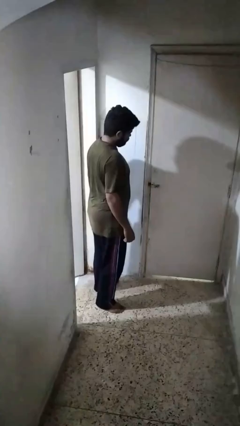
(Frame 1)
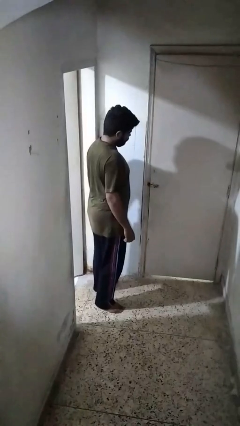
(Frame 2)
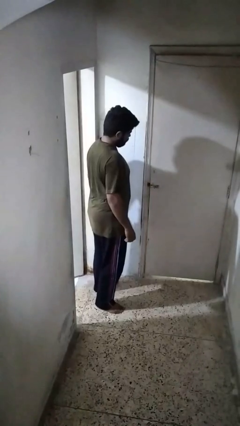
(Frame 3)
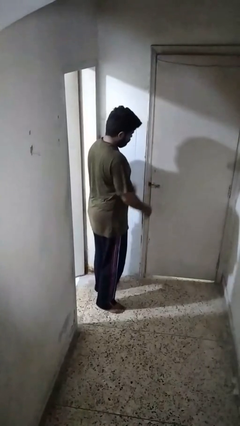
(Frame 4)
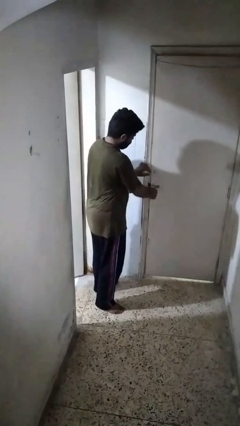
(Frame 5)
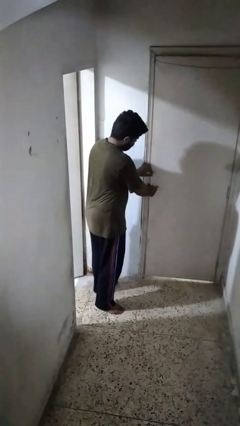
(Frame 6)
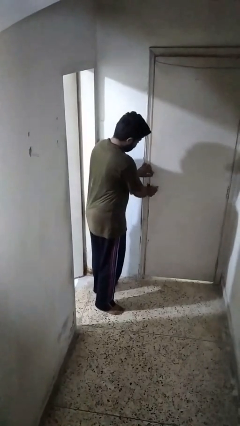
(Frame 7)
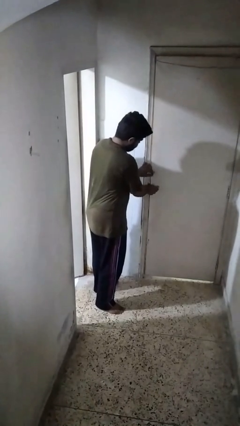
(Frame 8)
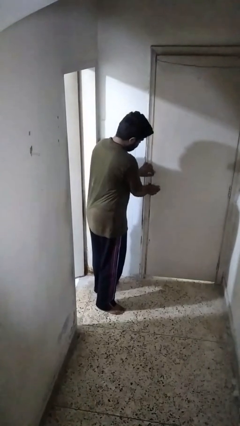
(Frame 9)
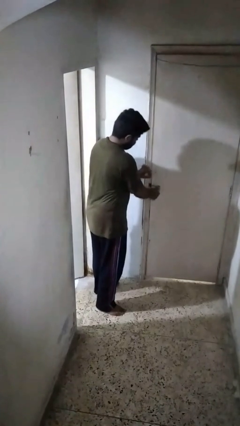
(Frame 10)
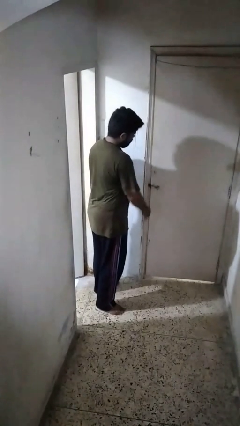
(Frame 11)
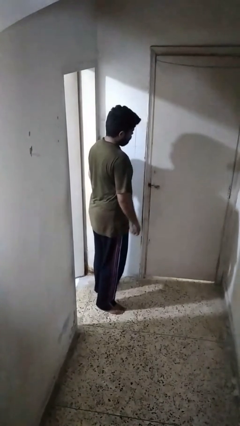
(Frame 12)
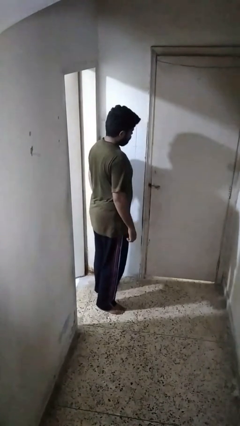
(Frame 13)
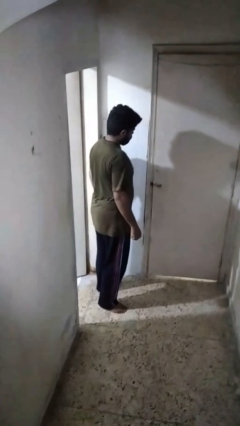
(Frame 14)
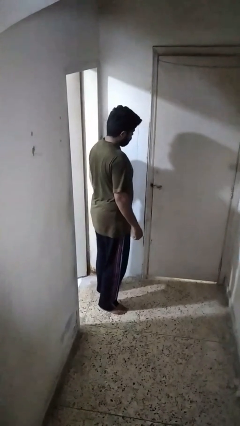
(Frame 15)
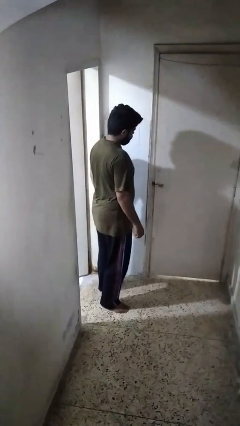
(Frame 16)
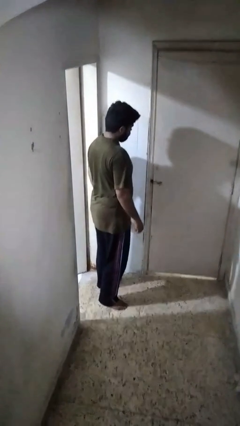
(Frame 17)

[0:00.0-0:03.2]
person unlocks door with keys

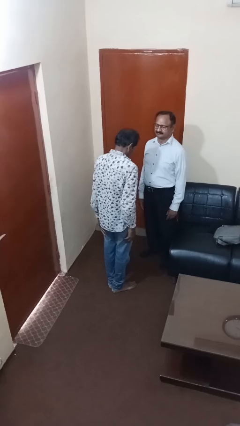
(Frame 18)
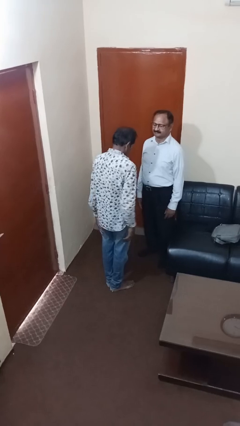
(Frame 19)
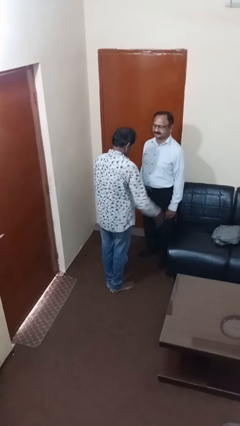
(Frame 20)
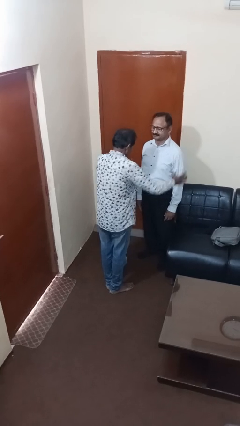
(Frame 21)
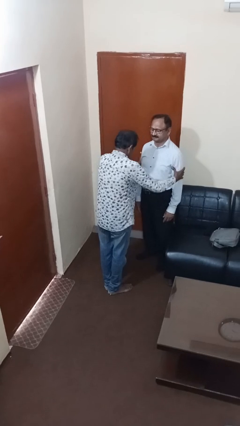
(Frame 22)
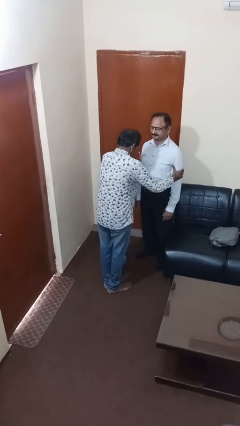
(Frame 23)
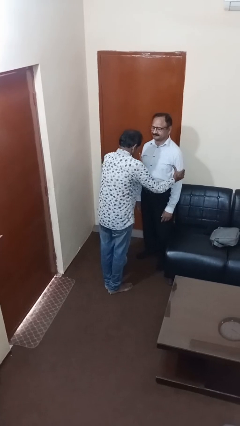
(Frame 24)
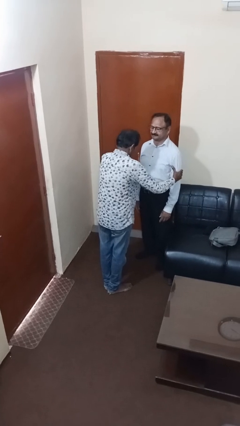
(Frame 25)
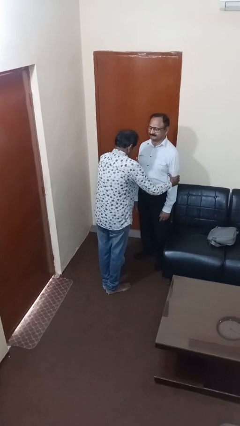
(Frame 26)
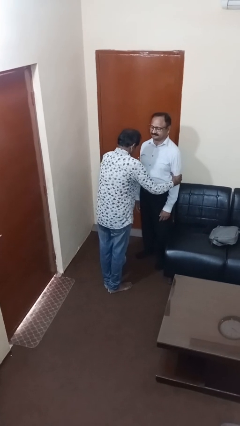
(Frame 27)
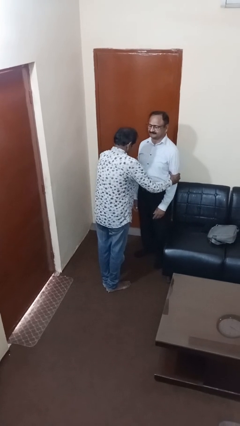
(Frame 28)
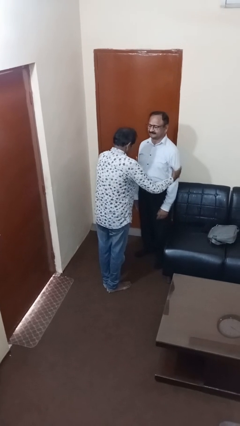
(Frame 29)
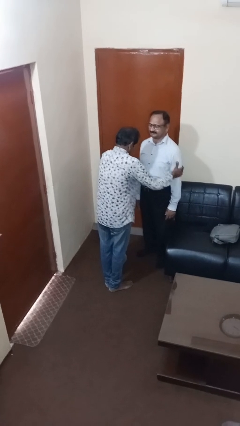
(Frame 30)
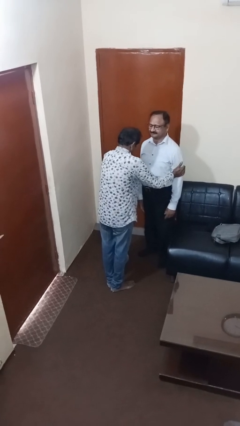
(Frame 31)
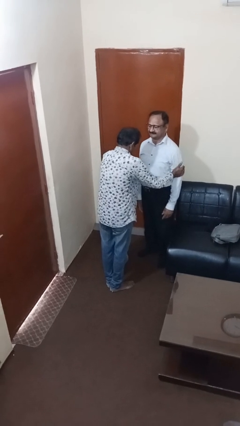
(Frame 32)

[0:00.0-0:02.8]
person grabs person by bicep

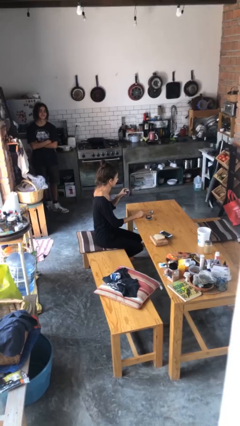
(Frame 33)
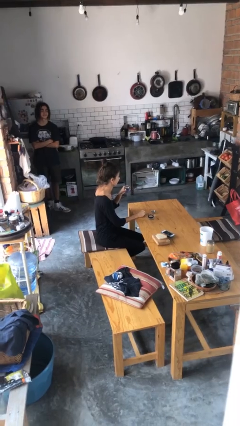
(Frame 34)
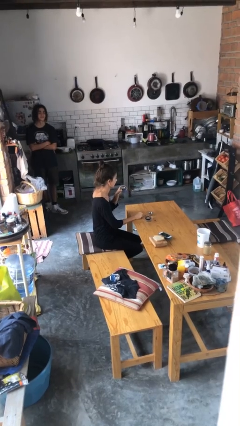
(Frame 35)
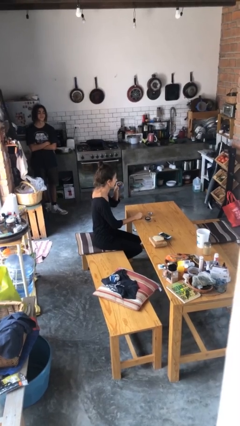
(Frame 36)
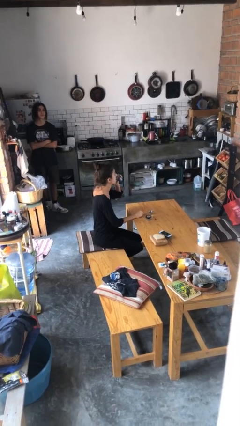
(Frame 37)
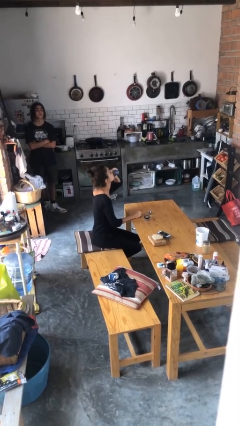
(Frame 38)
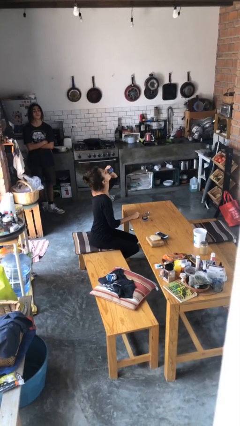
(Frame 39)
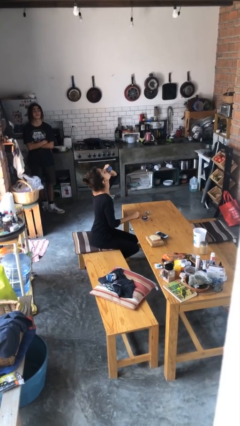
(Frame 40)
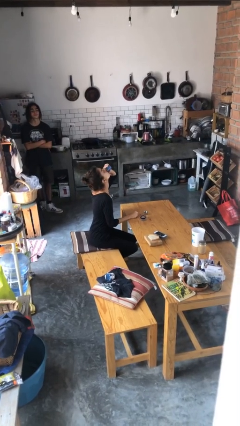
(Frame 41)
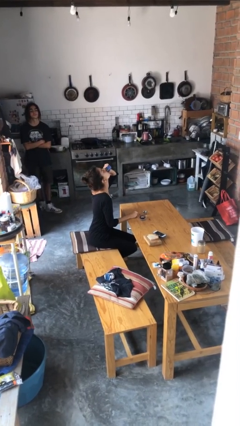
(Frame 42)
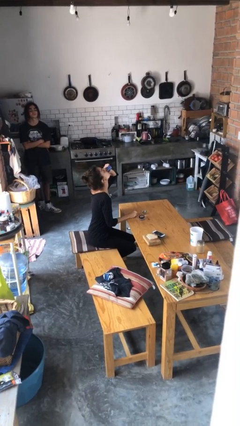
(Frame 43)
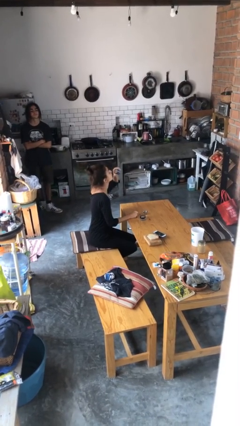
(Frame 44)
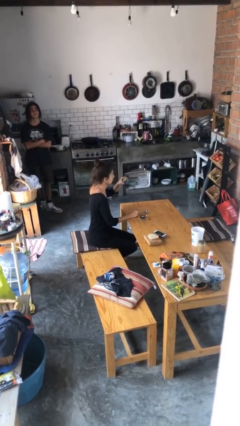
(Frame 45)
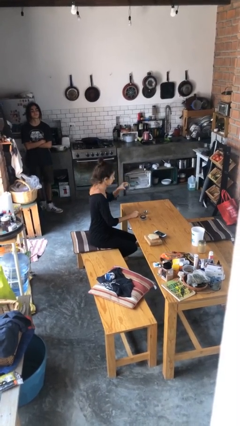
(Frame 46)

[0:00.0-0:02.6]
person drinks from shotglass

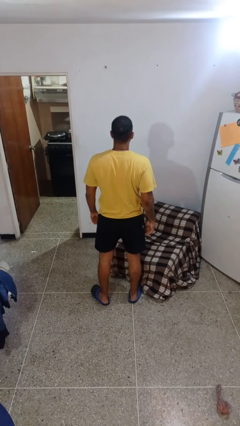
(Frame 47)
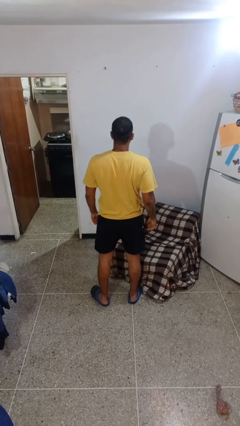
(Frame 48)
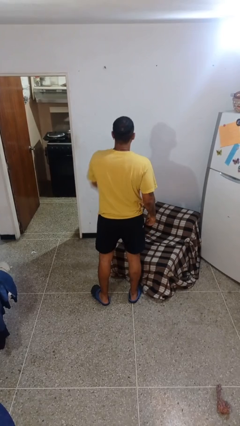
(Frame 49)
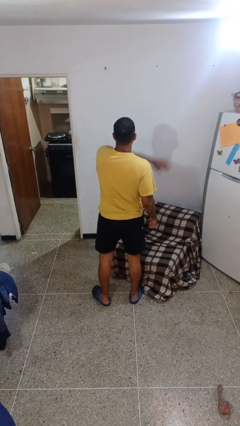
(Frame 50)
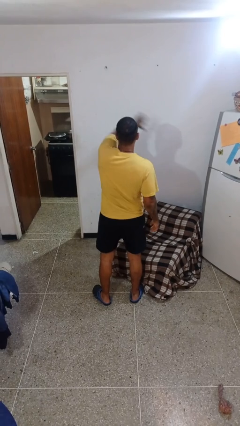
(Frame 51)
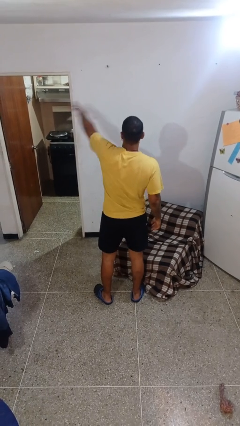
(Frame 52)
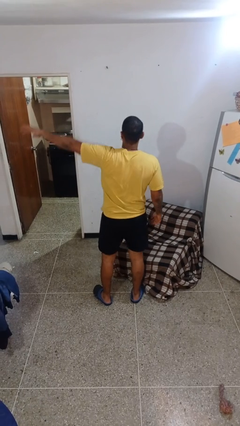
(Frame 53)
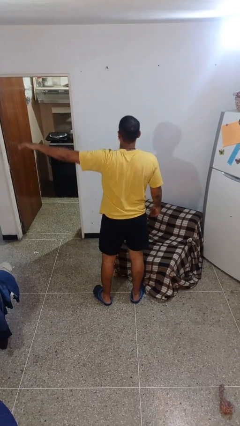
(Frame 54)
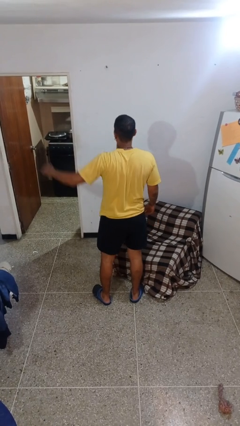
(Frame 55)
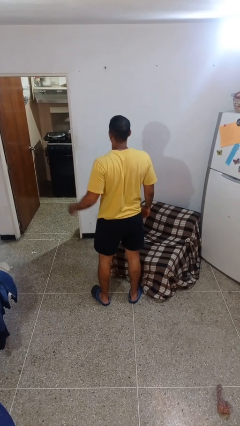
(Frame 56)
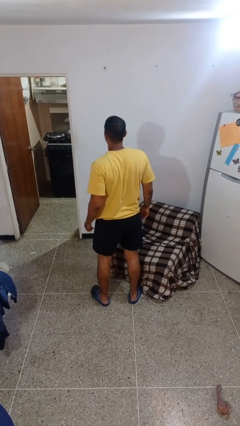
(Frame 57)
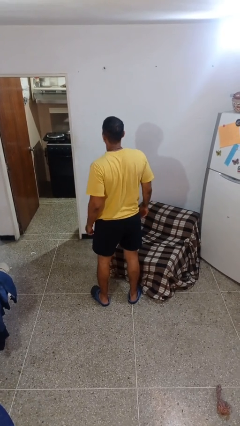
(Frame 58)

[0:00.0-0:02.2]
person gestures swipe left

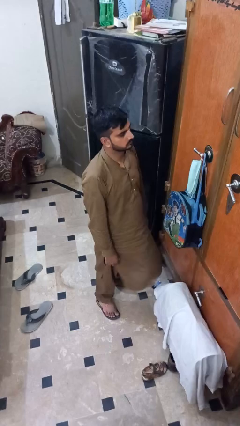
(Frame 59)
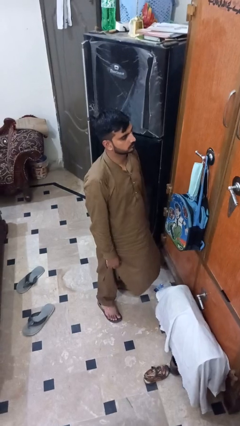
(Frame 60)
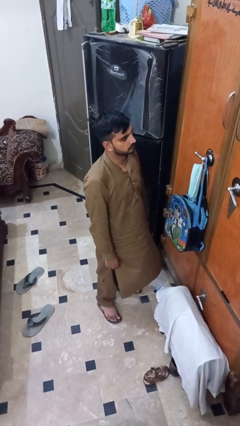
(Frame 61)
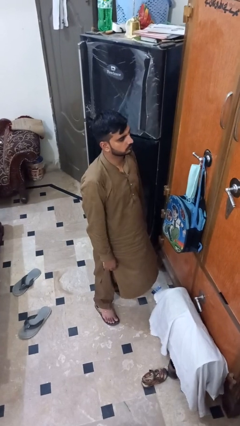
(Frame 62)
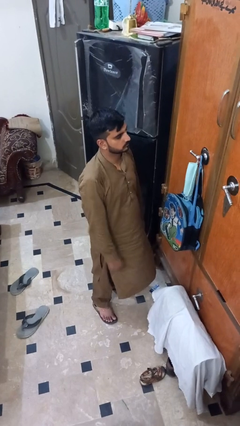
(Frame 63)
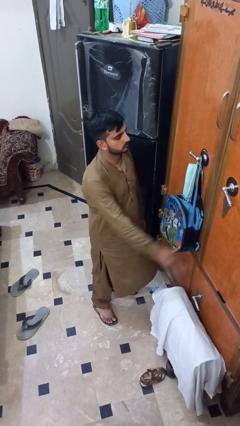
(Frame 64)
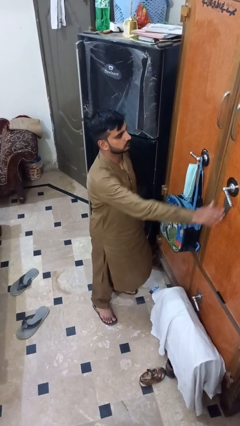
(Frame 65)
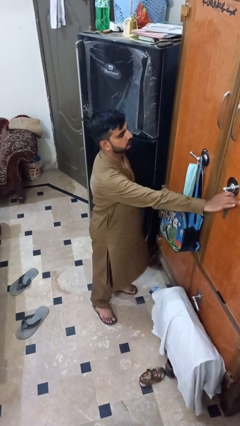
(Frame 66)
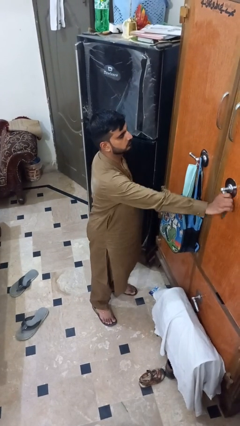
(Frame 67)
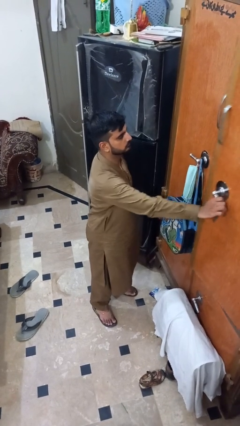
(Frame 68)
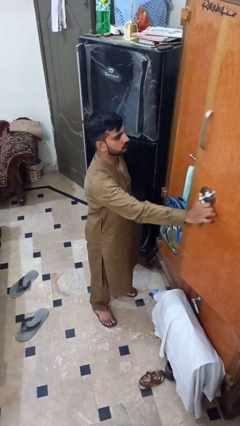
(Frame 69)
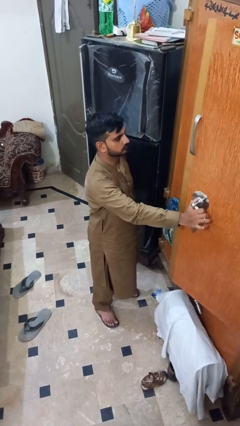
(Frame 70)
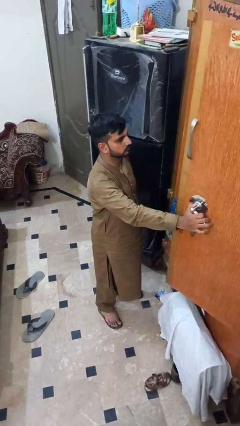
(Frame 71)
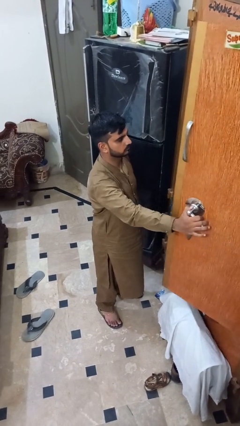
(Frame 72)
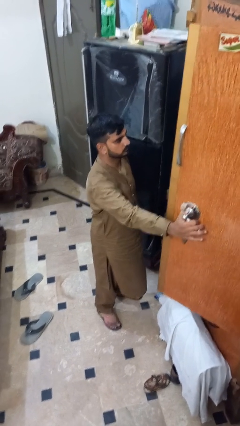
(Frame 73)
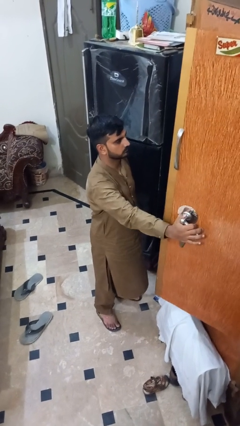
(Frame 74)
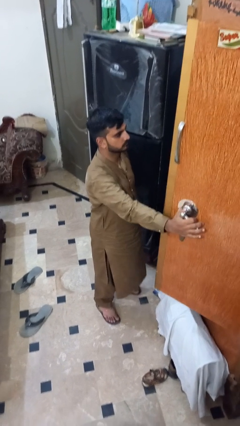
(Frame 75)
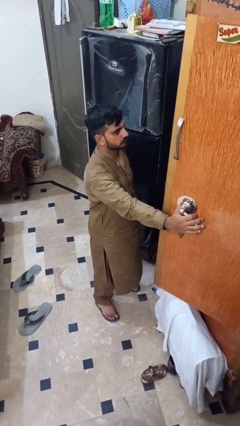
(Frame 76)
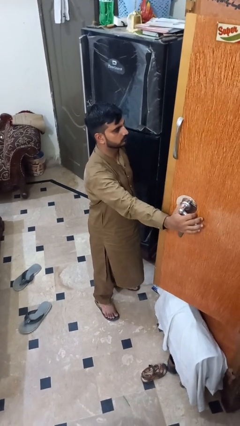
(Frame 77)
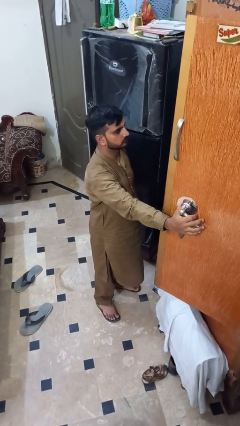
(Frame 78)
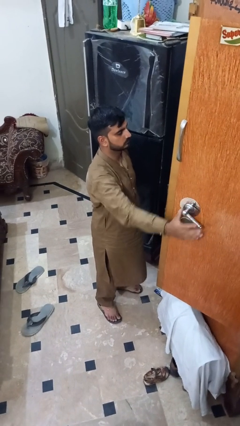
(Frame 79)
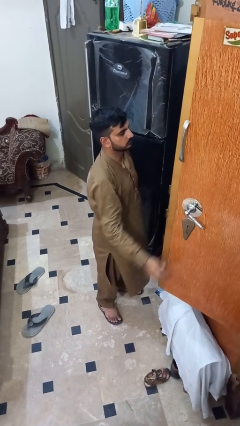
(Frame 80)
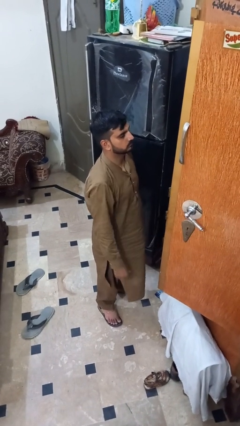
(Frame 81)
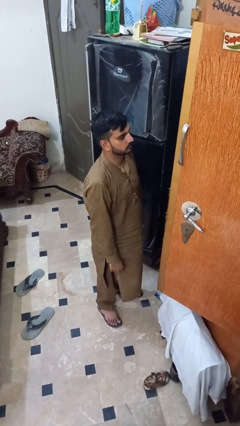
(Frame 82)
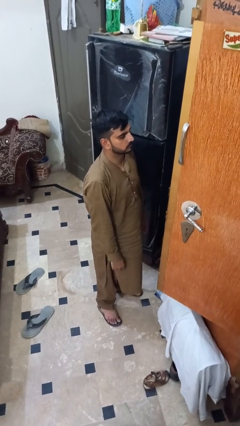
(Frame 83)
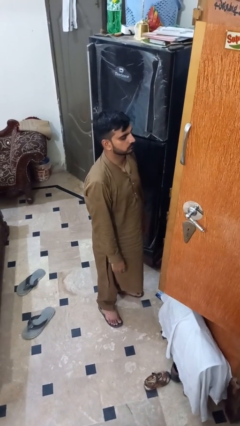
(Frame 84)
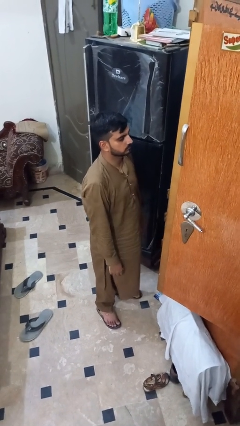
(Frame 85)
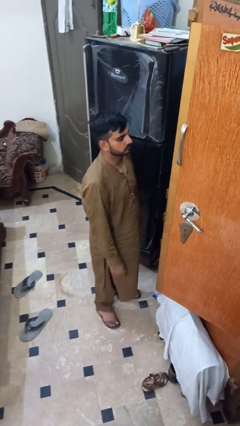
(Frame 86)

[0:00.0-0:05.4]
person opens box

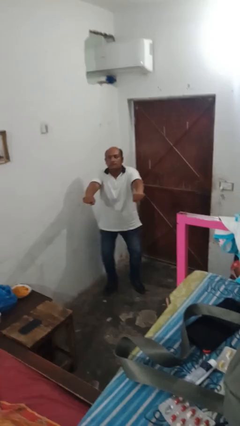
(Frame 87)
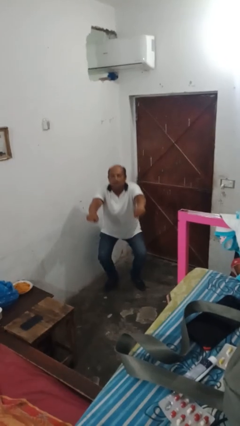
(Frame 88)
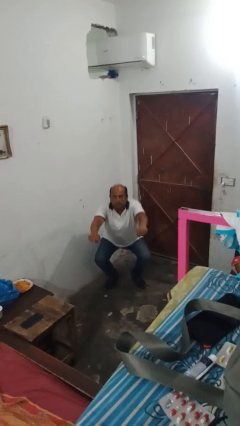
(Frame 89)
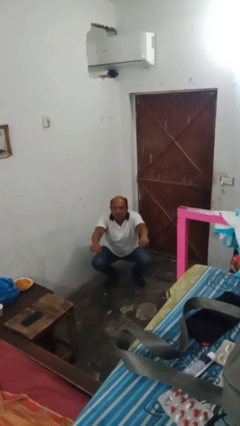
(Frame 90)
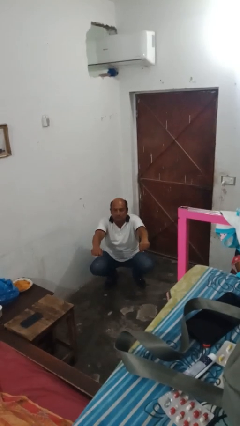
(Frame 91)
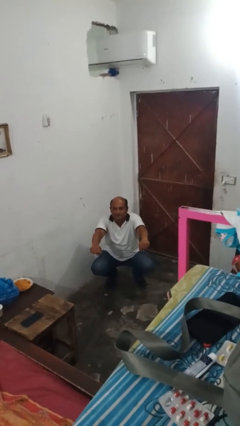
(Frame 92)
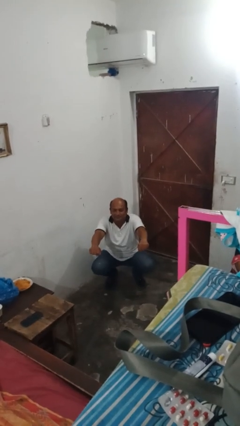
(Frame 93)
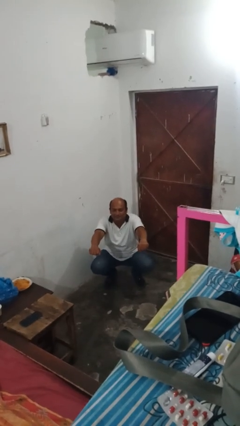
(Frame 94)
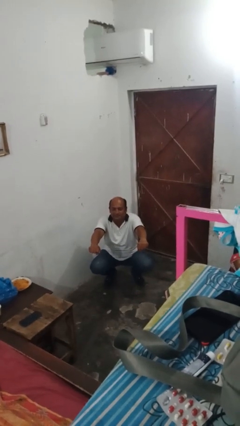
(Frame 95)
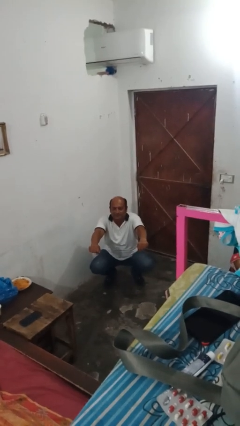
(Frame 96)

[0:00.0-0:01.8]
person squats
